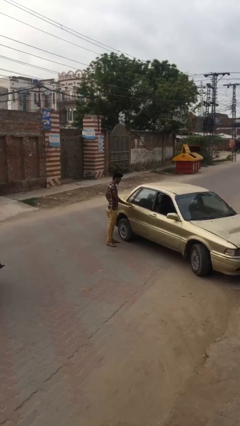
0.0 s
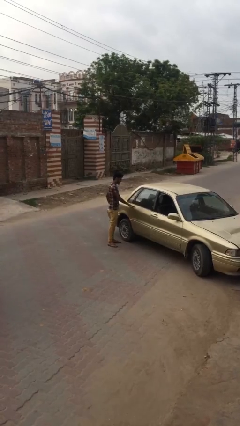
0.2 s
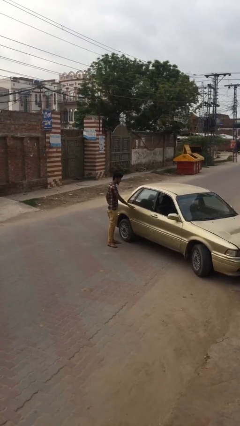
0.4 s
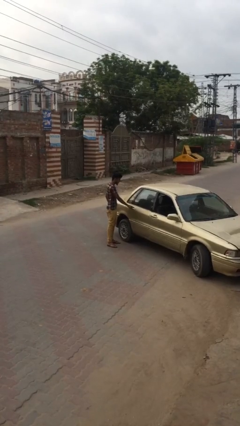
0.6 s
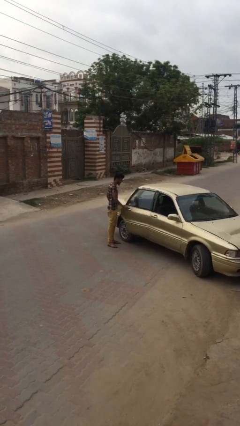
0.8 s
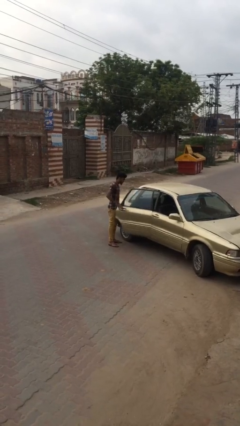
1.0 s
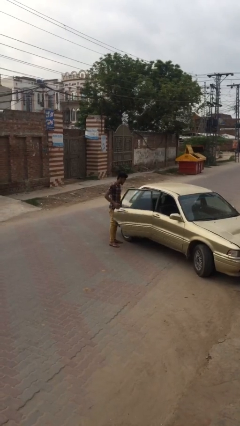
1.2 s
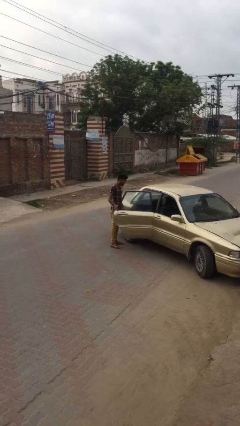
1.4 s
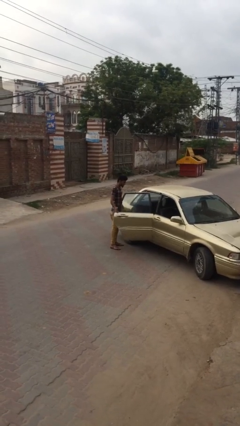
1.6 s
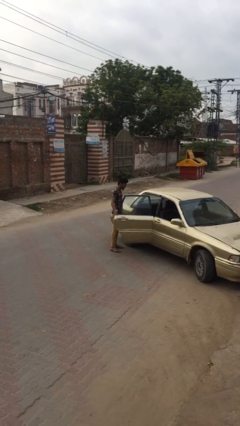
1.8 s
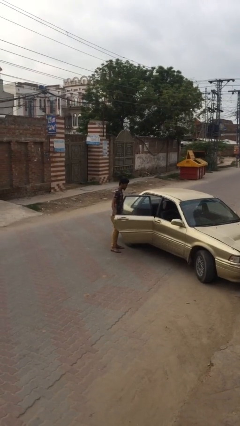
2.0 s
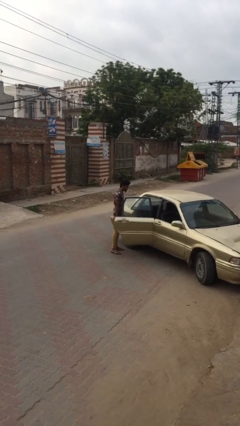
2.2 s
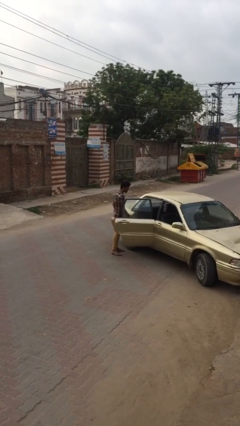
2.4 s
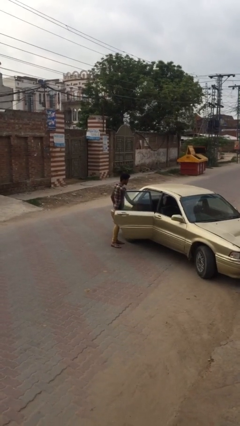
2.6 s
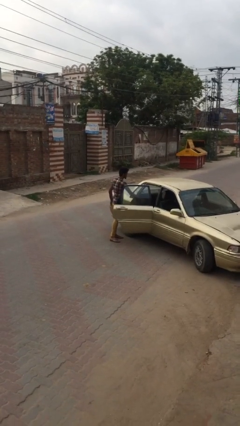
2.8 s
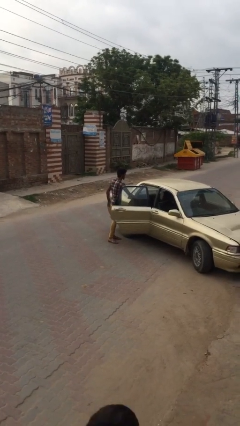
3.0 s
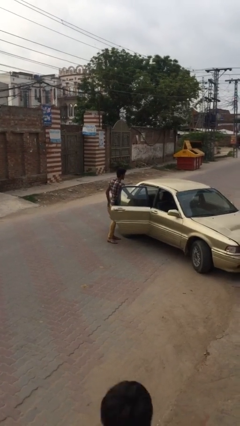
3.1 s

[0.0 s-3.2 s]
person opens car door

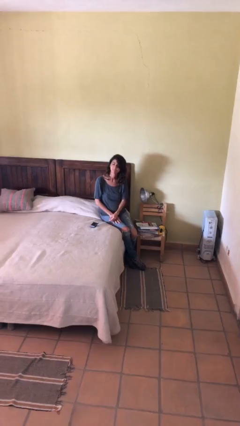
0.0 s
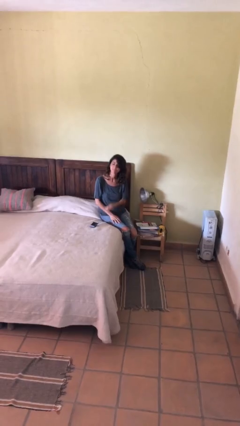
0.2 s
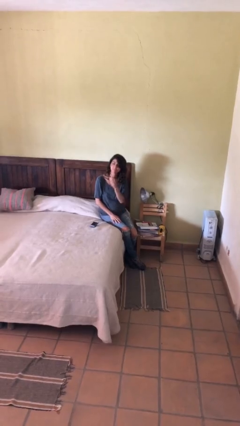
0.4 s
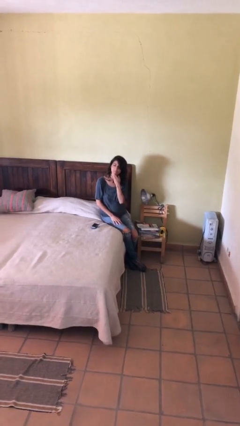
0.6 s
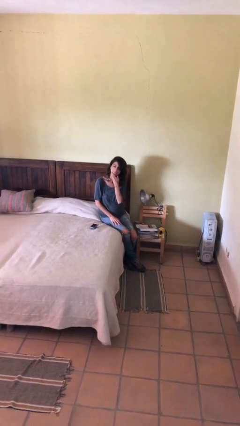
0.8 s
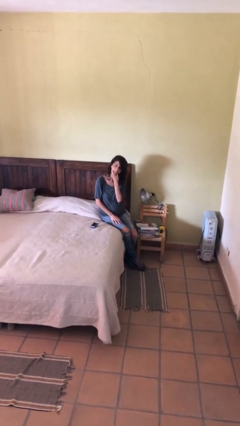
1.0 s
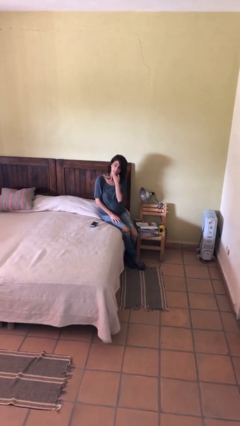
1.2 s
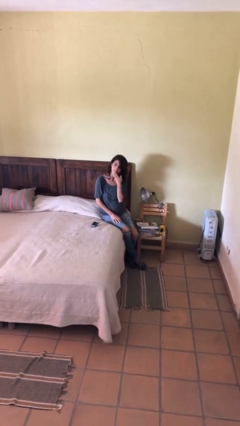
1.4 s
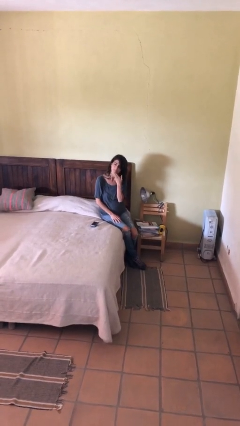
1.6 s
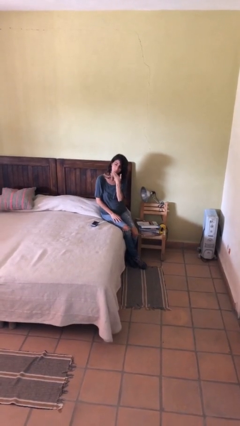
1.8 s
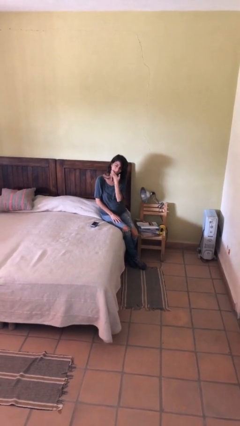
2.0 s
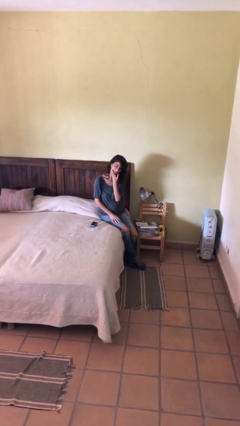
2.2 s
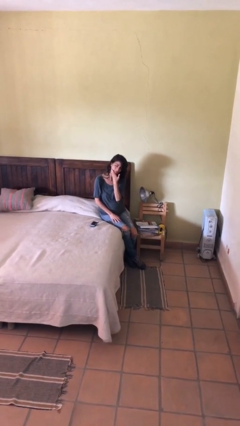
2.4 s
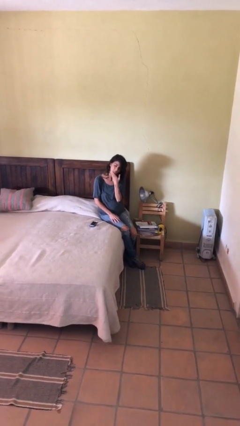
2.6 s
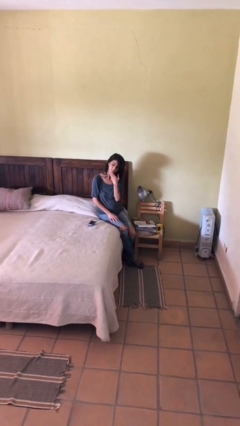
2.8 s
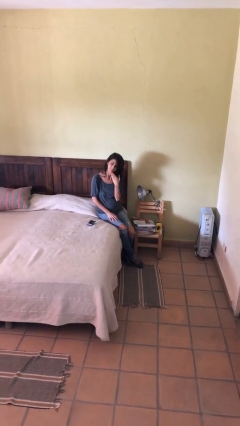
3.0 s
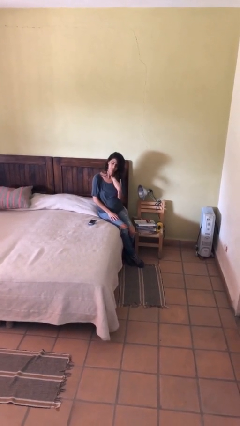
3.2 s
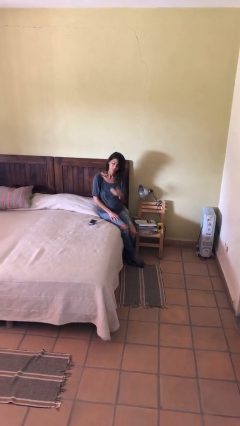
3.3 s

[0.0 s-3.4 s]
person strokes chin

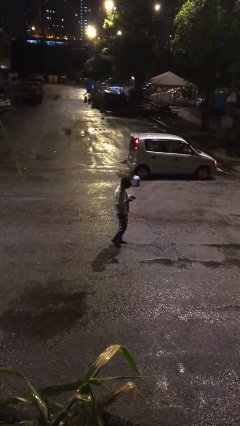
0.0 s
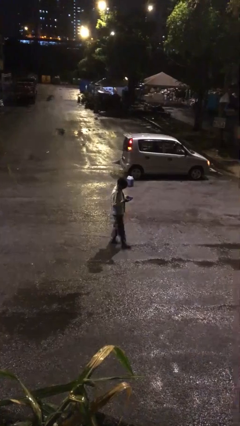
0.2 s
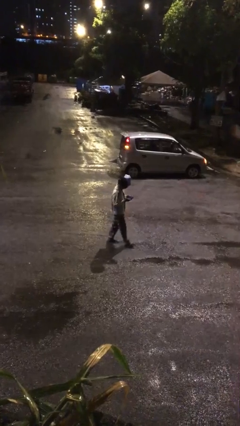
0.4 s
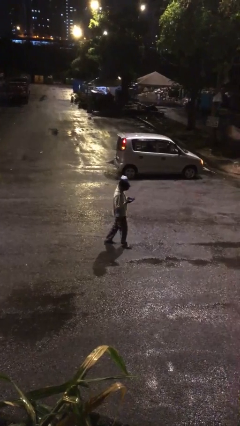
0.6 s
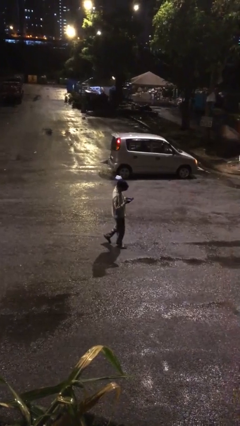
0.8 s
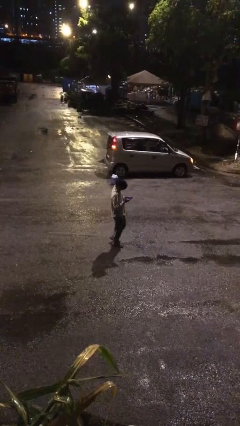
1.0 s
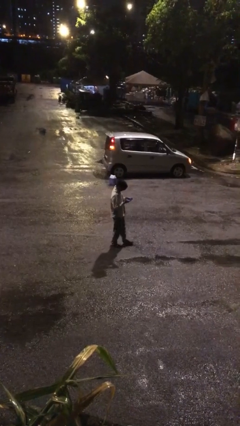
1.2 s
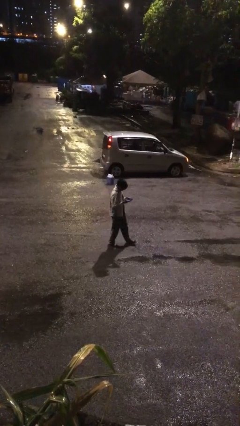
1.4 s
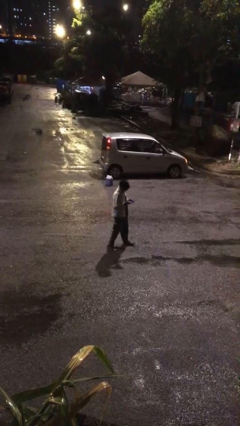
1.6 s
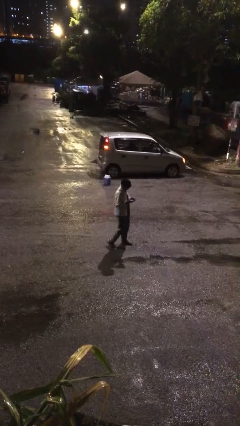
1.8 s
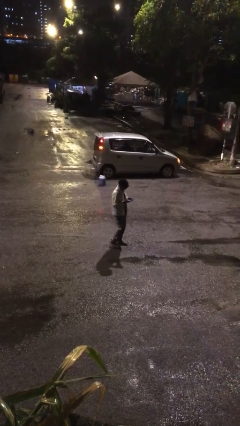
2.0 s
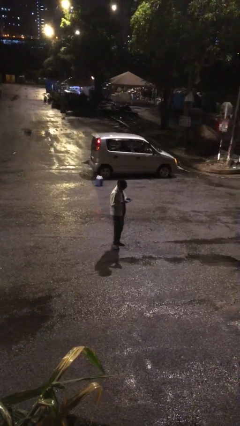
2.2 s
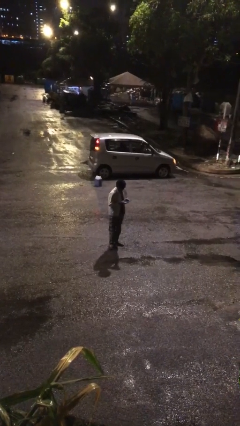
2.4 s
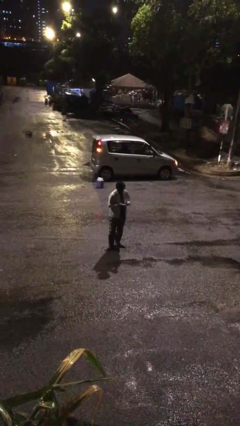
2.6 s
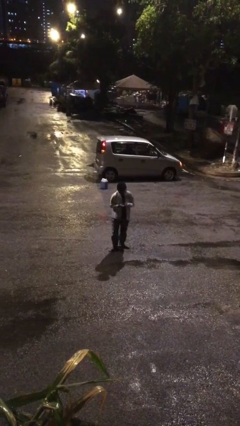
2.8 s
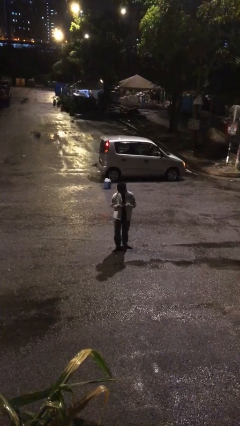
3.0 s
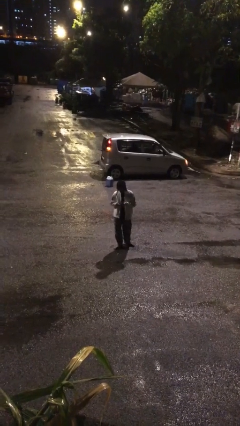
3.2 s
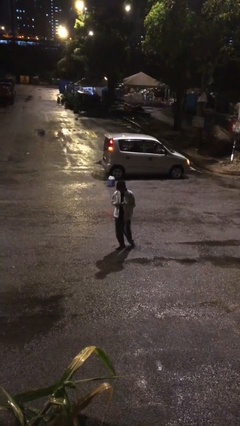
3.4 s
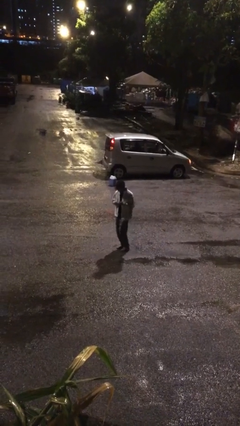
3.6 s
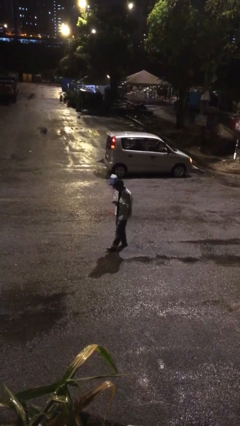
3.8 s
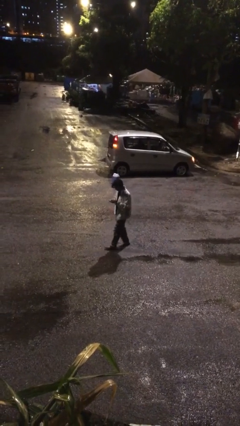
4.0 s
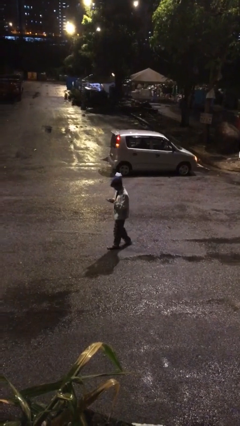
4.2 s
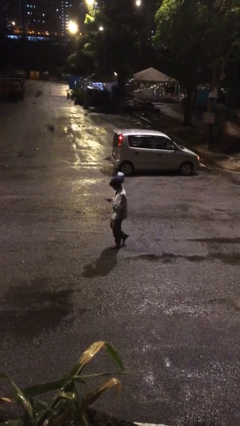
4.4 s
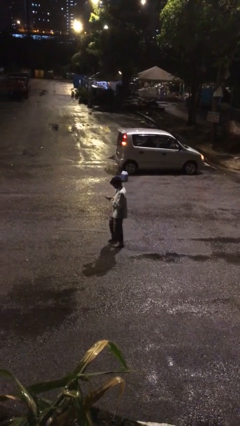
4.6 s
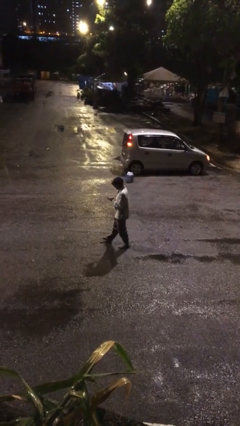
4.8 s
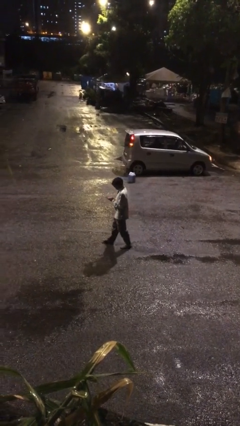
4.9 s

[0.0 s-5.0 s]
person texts on phone

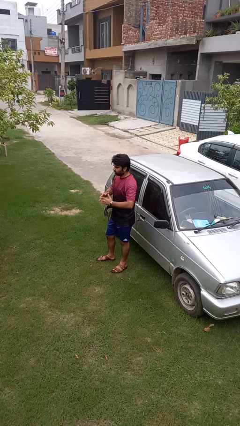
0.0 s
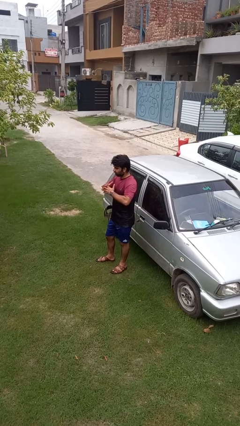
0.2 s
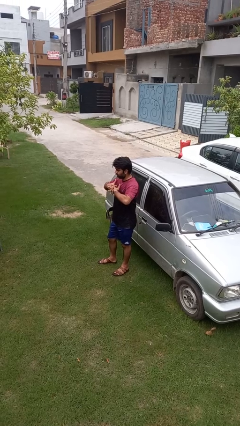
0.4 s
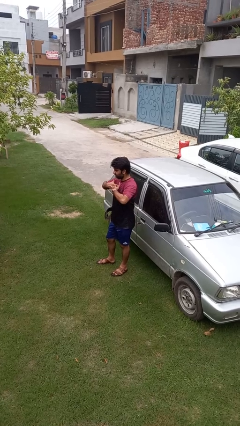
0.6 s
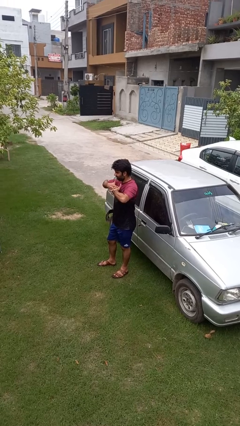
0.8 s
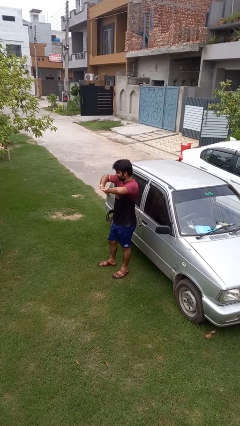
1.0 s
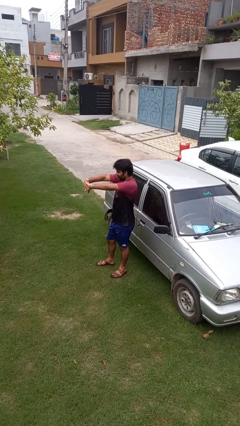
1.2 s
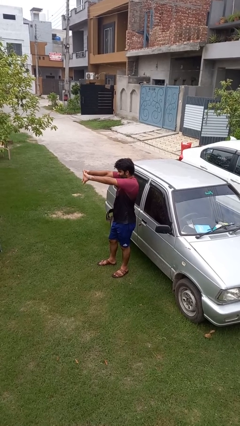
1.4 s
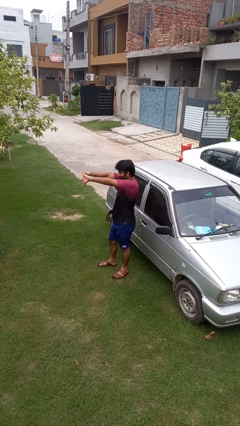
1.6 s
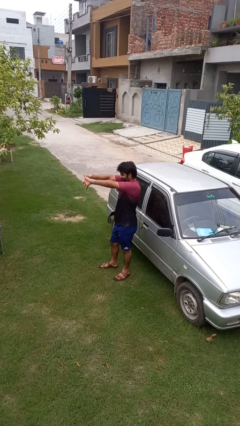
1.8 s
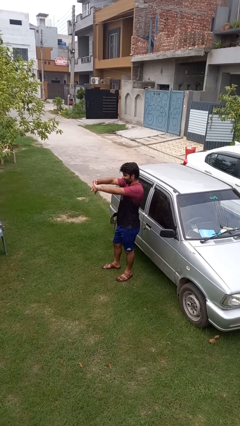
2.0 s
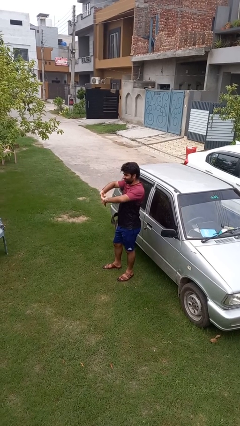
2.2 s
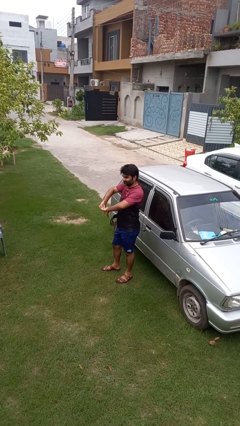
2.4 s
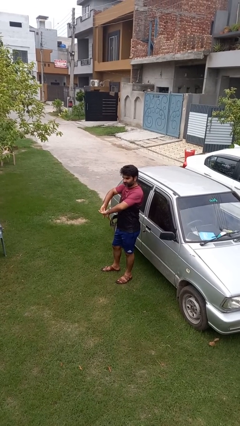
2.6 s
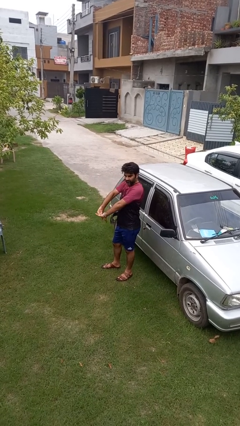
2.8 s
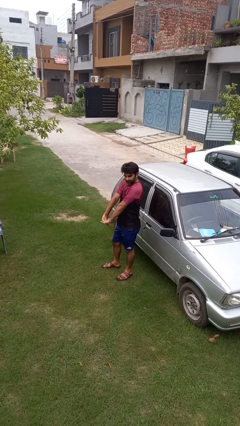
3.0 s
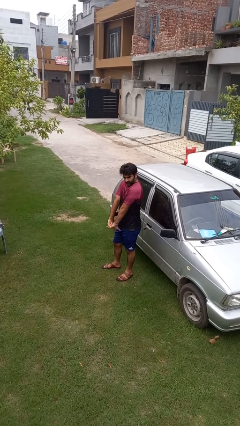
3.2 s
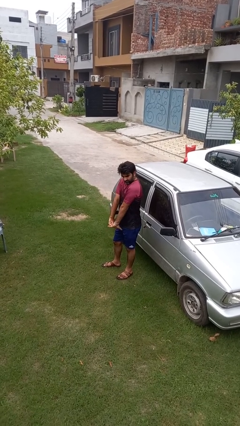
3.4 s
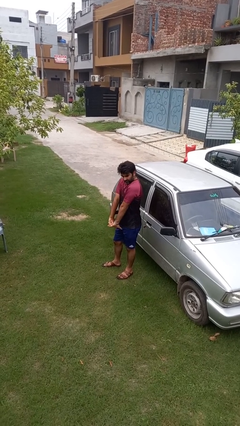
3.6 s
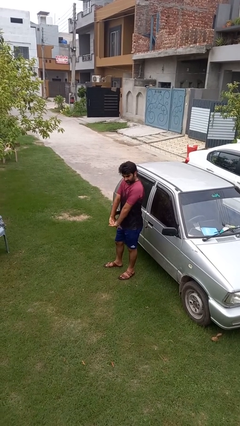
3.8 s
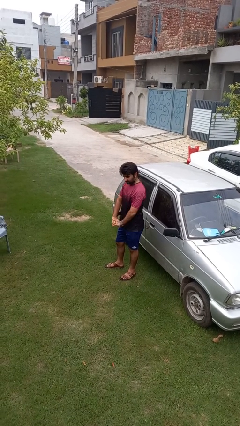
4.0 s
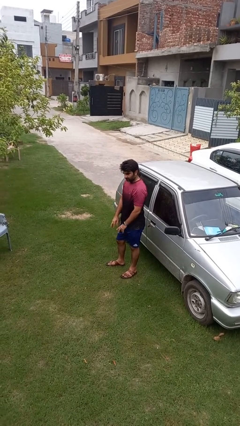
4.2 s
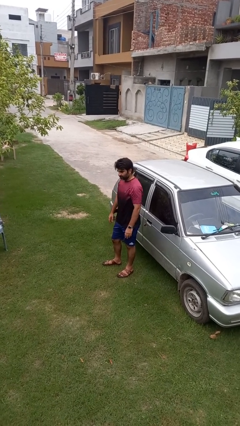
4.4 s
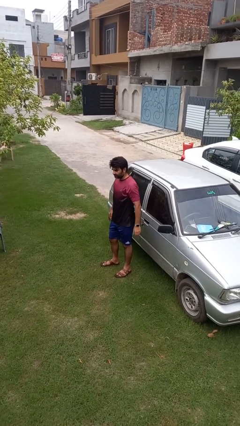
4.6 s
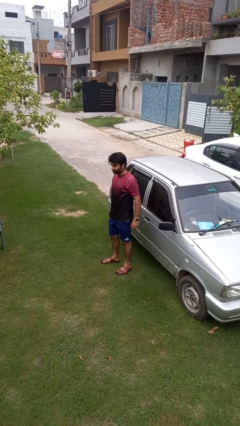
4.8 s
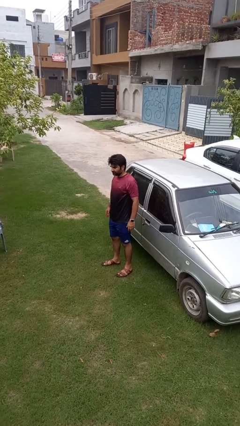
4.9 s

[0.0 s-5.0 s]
person cracks knuckles

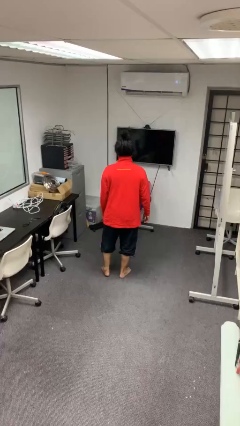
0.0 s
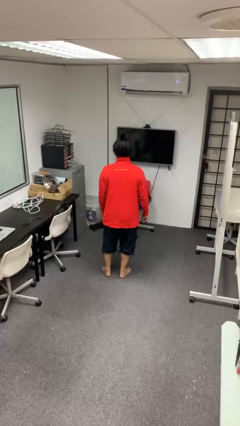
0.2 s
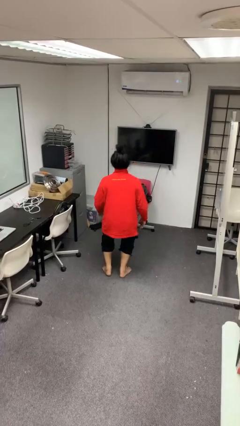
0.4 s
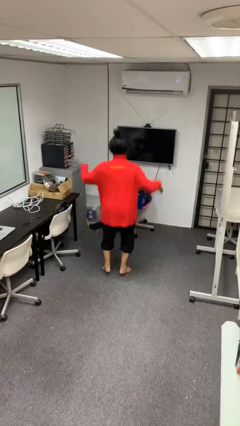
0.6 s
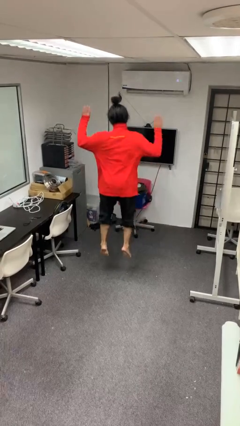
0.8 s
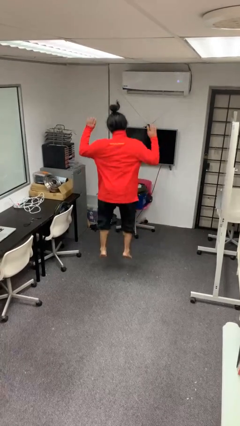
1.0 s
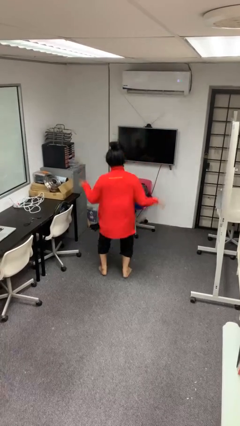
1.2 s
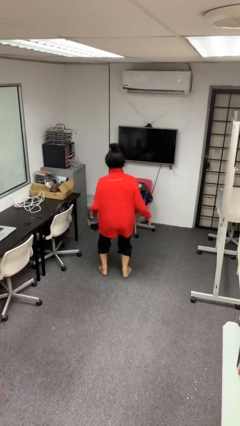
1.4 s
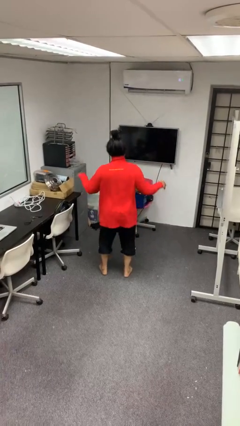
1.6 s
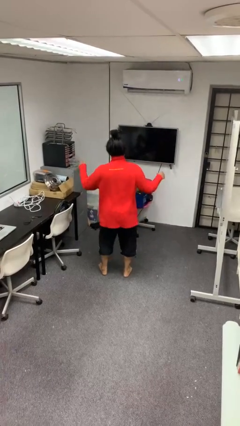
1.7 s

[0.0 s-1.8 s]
person jumps
